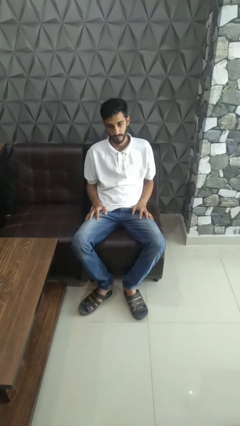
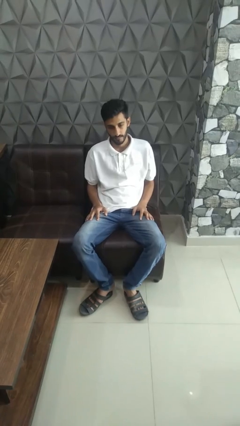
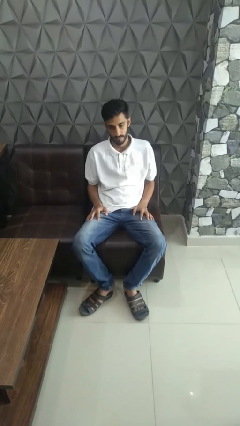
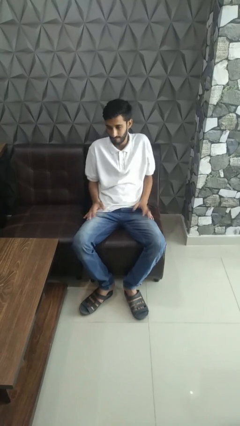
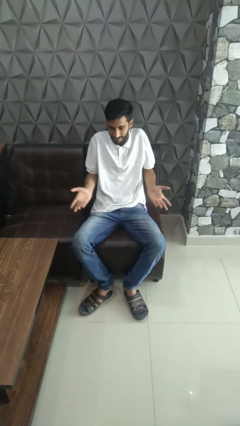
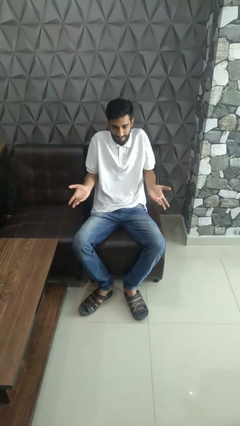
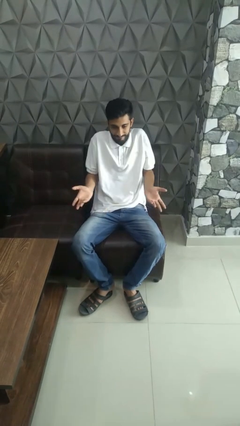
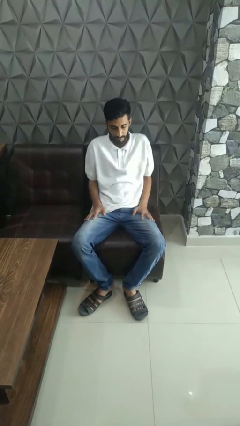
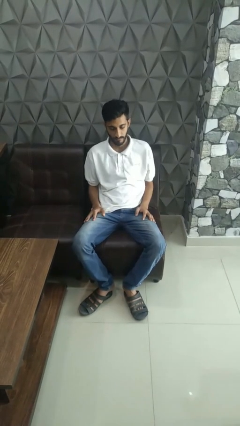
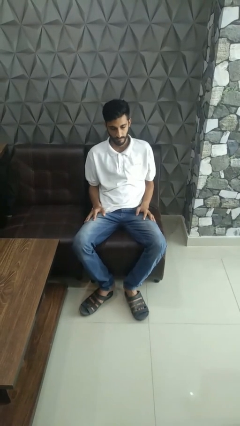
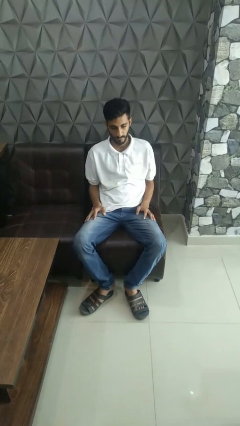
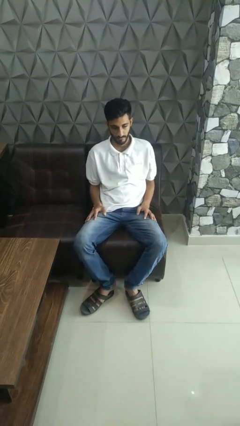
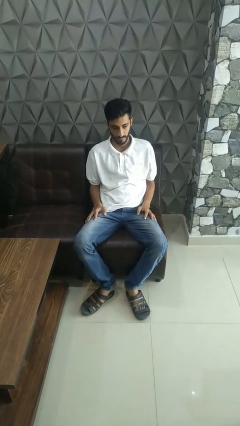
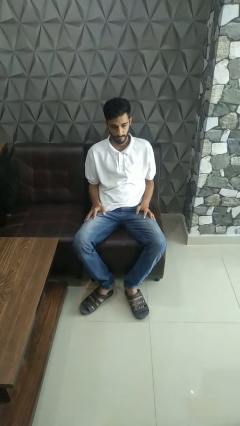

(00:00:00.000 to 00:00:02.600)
person shrugs

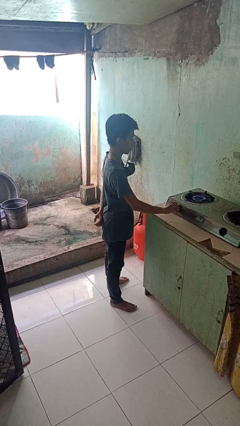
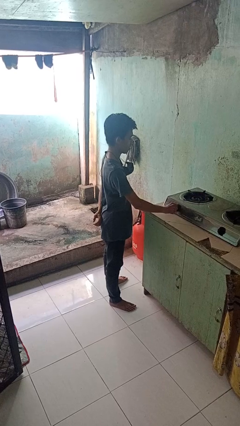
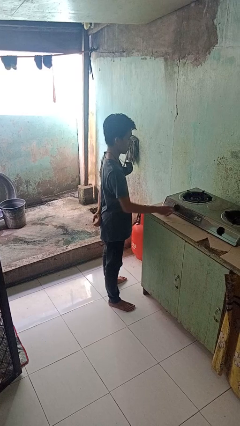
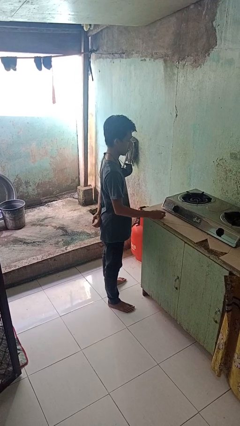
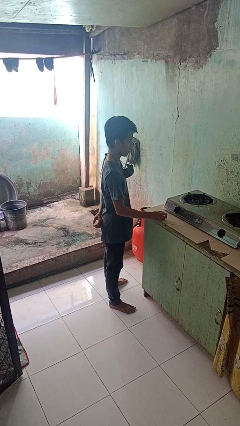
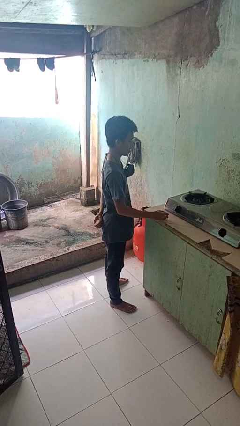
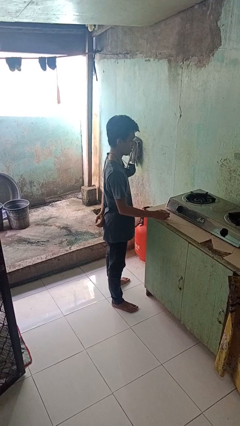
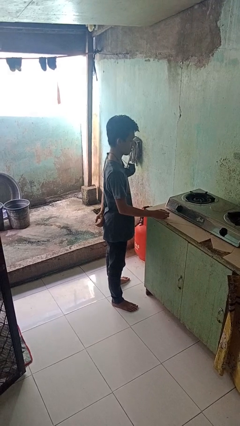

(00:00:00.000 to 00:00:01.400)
person turns off stovetop

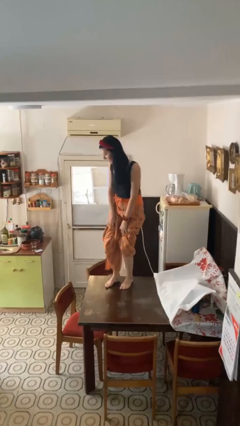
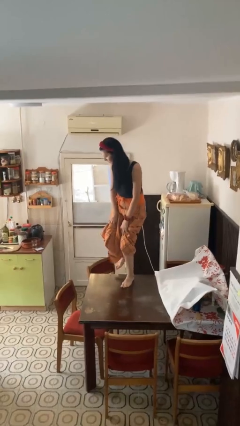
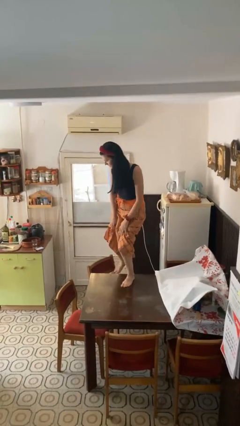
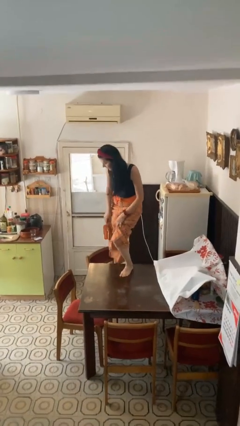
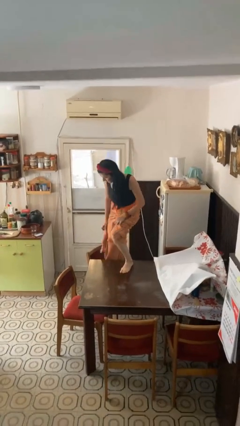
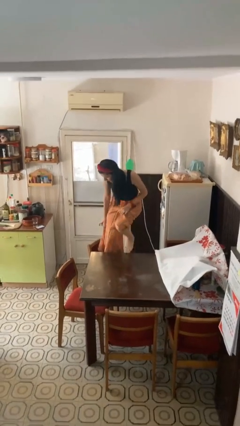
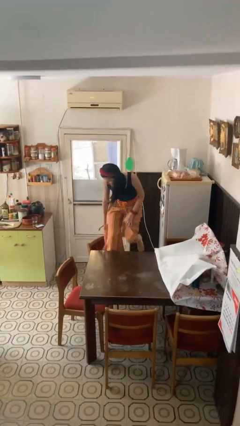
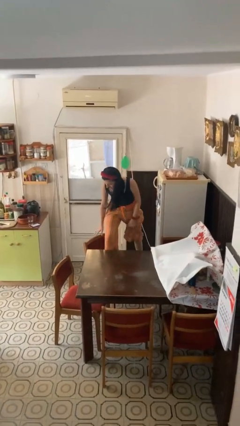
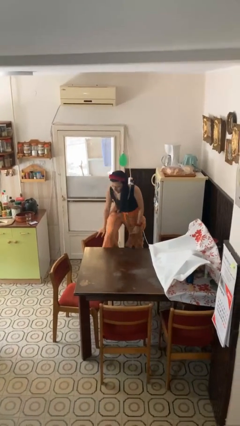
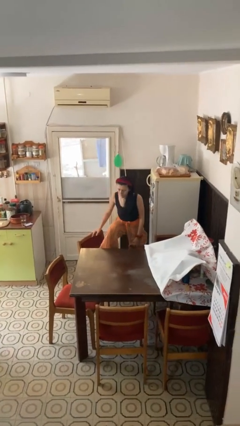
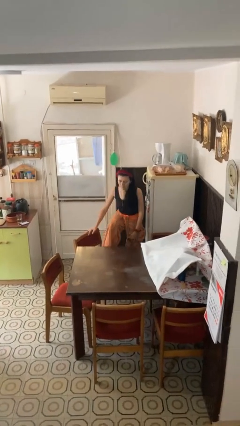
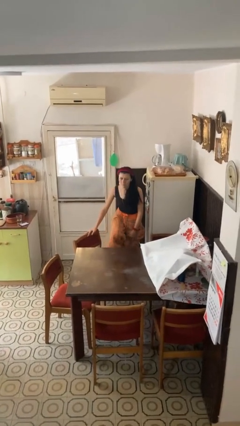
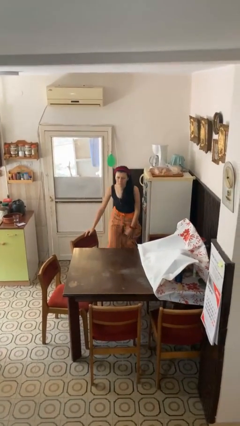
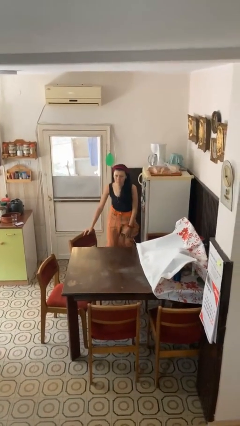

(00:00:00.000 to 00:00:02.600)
person climbs off table

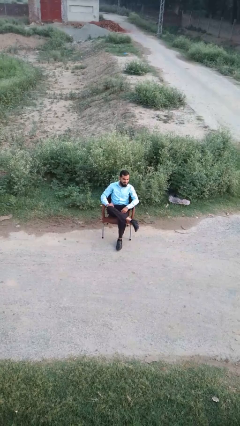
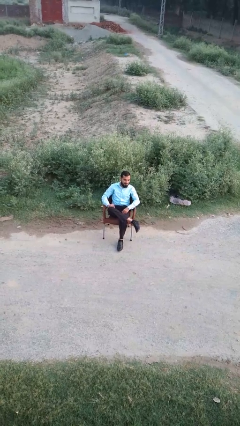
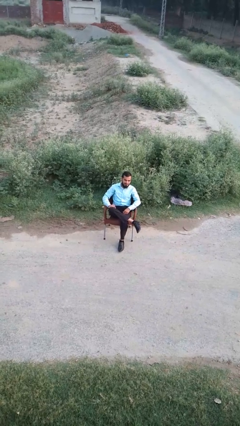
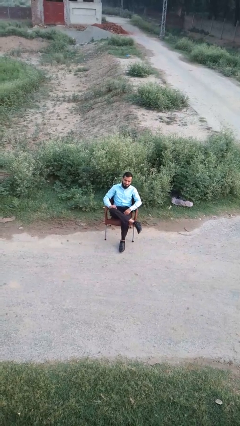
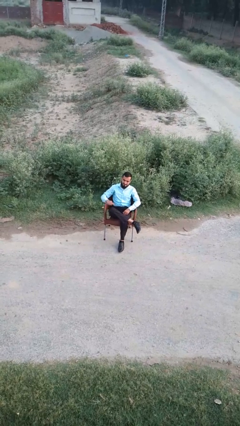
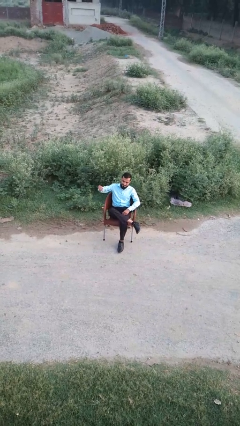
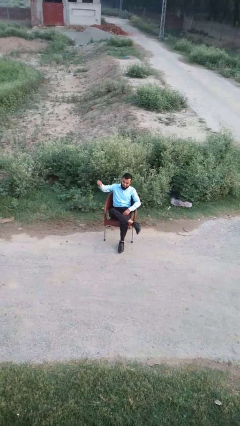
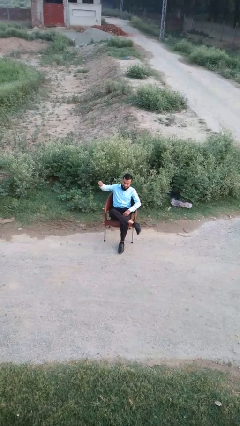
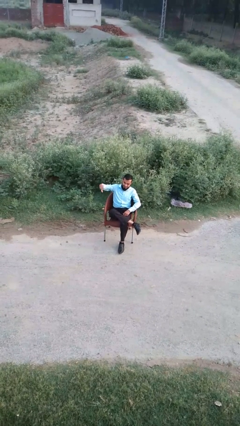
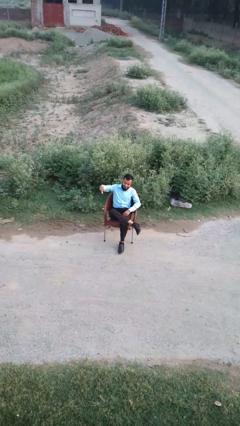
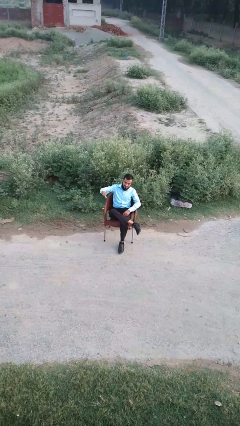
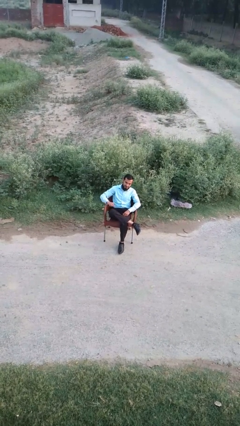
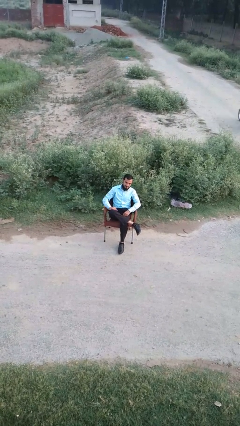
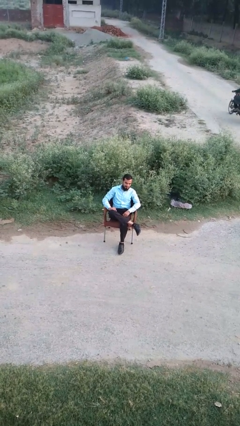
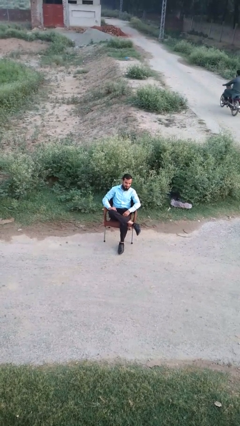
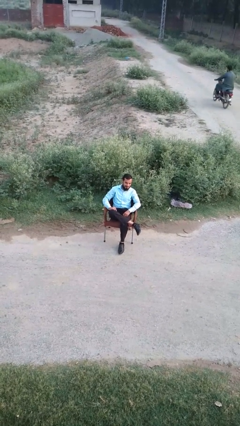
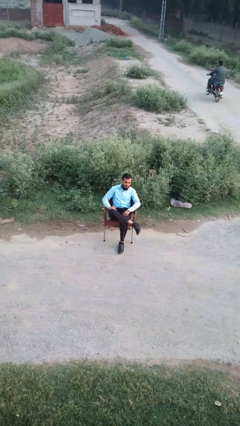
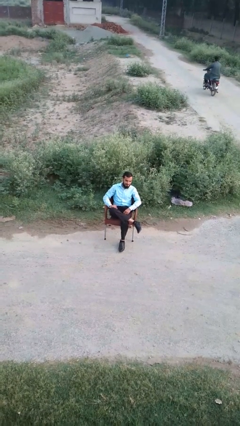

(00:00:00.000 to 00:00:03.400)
person gestures thumbs down

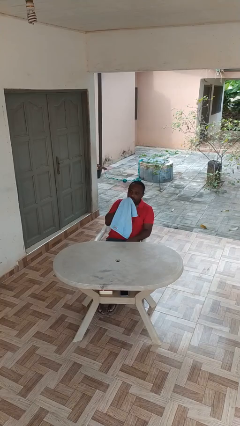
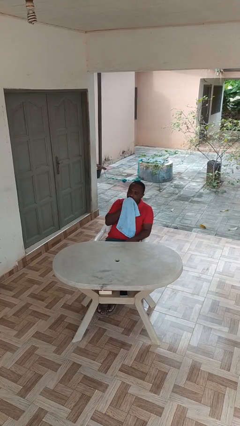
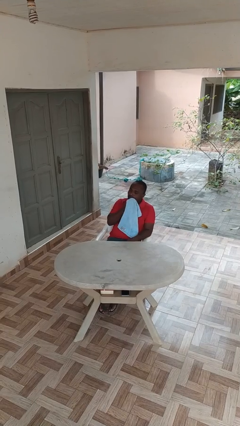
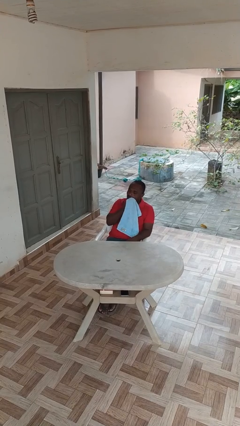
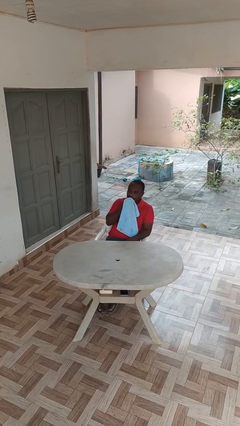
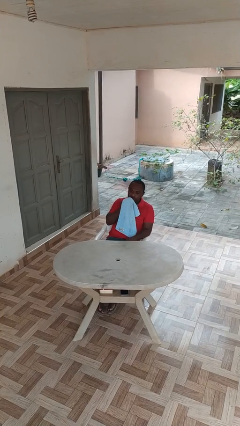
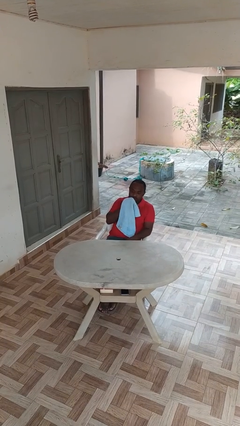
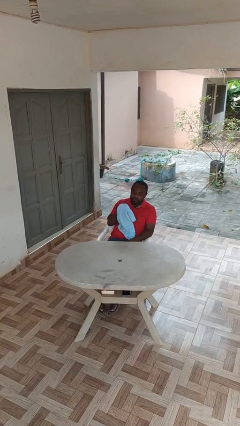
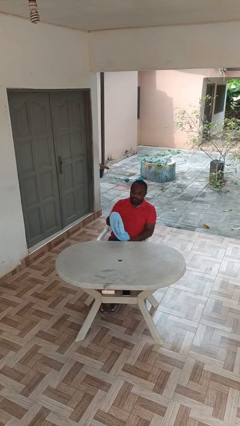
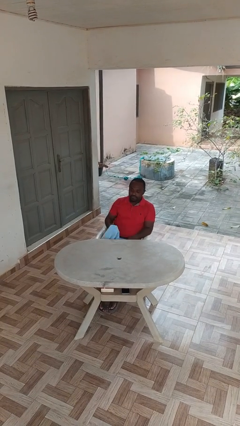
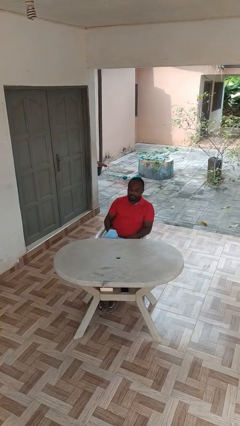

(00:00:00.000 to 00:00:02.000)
person wipes mouth with napkin

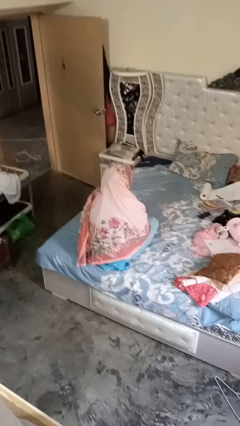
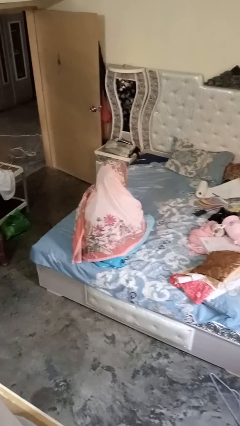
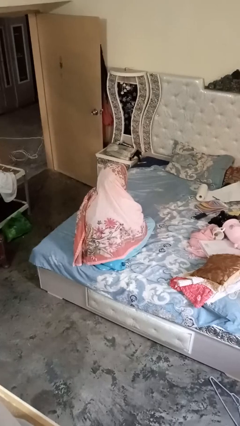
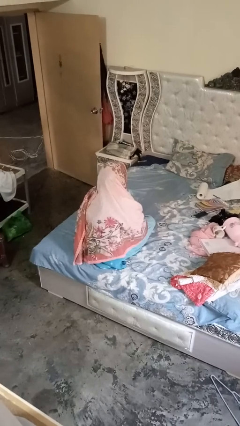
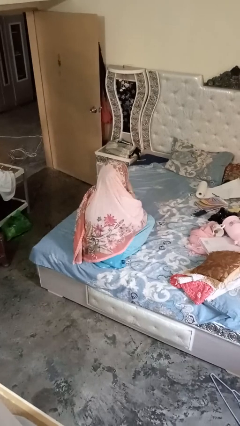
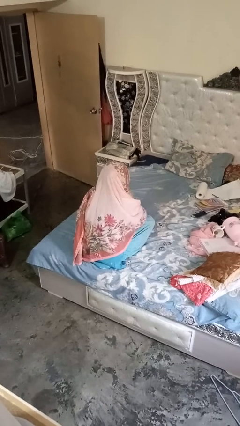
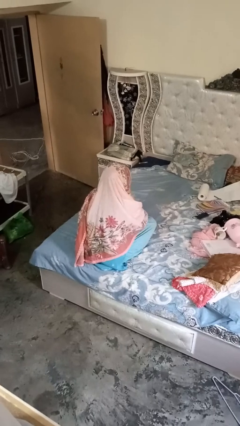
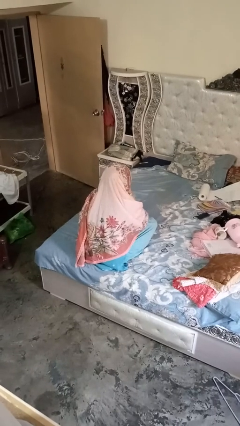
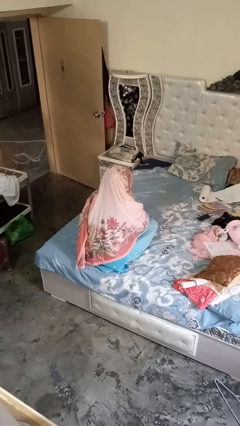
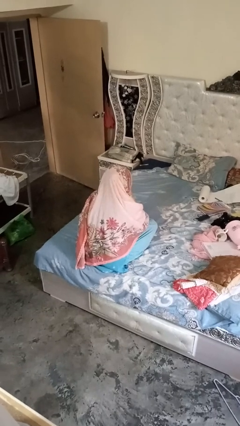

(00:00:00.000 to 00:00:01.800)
person blows nose

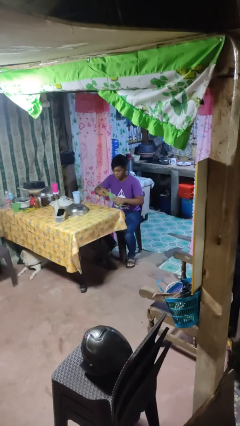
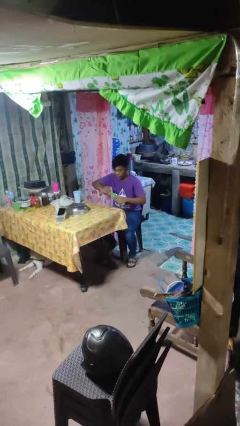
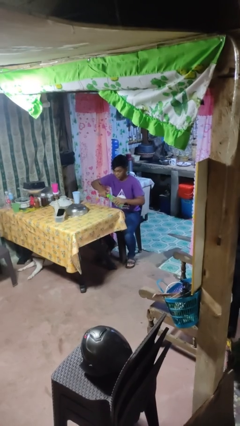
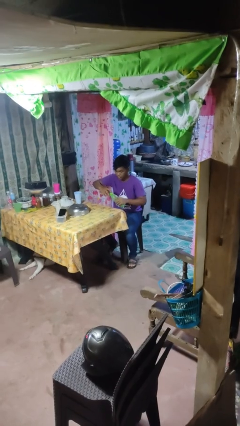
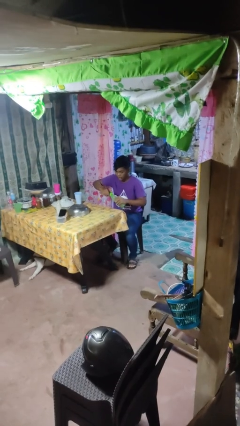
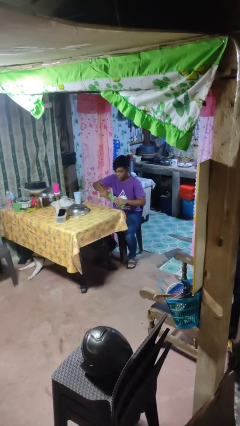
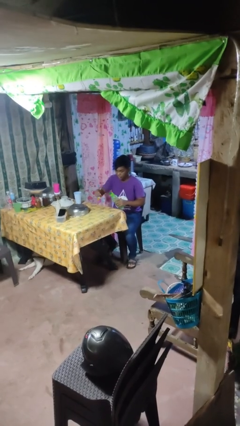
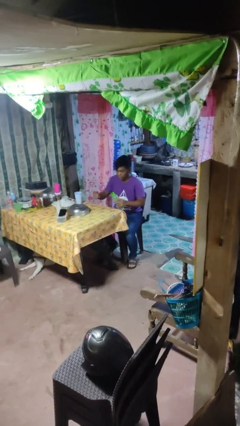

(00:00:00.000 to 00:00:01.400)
person screws lid to bottle

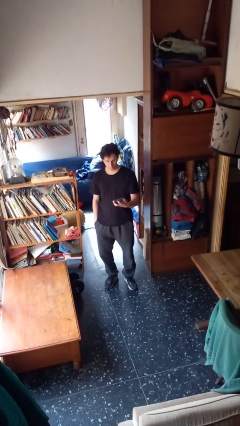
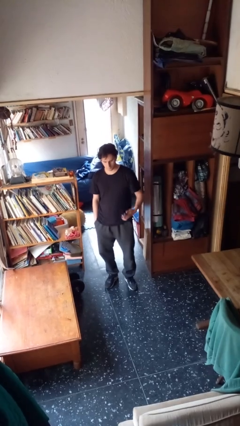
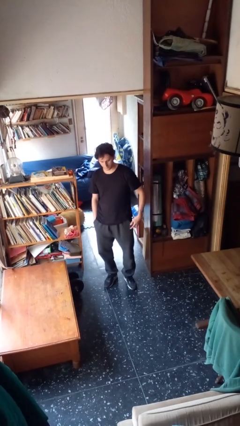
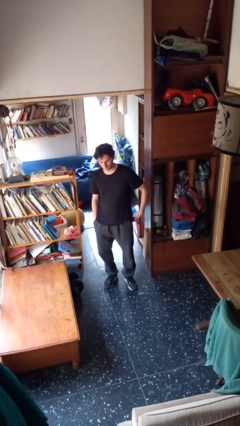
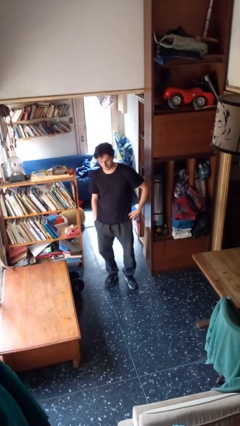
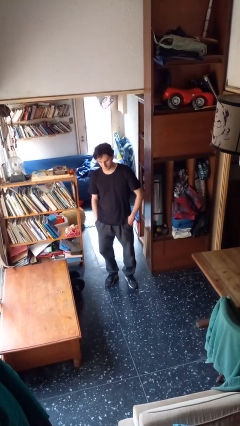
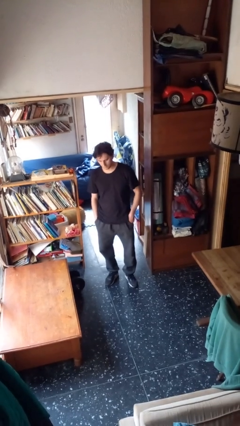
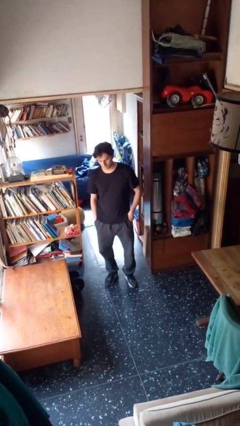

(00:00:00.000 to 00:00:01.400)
person puts phone into pocket
